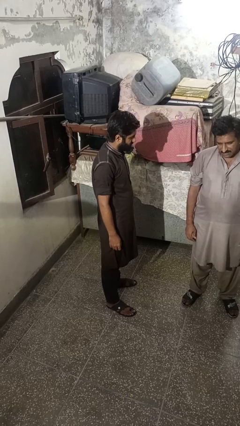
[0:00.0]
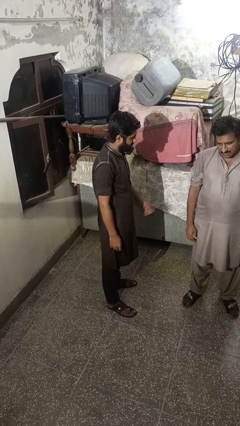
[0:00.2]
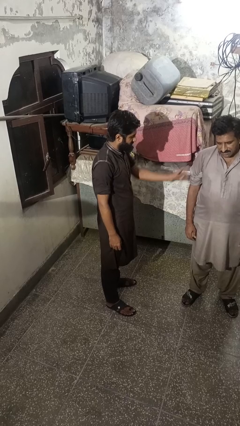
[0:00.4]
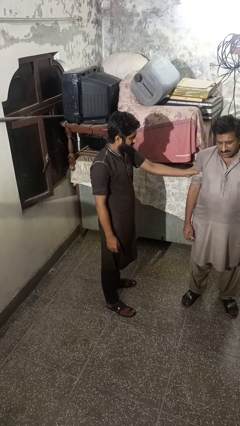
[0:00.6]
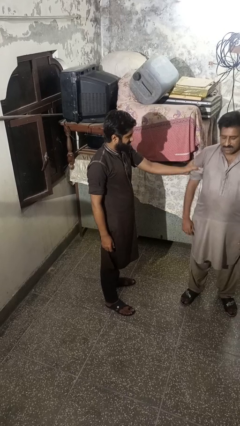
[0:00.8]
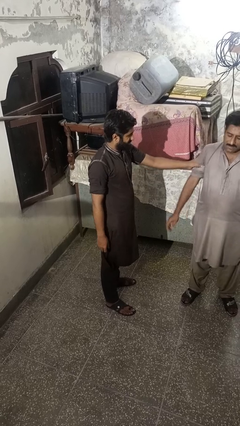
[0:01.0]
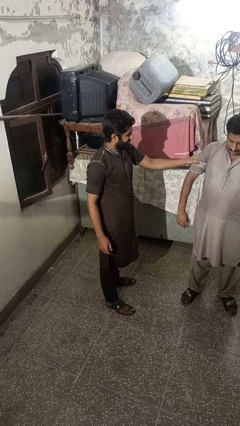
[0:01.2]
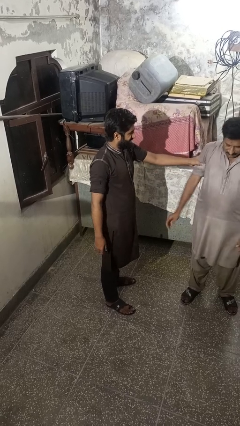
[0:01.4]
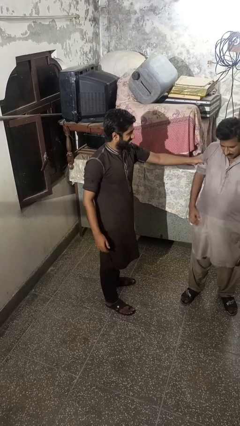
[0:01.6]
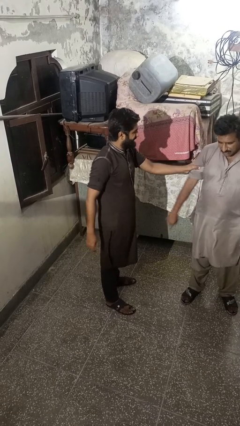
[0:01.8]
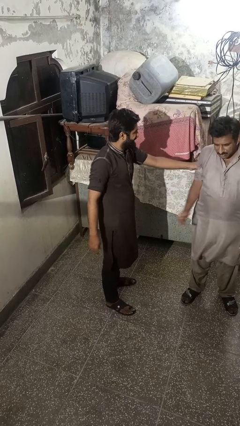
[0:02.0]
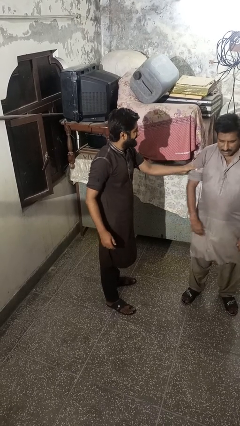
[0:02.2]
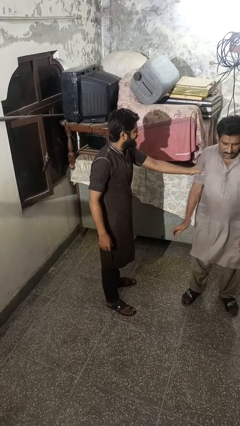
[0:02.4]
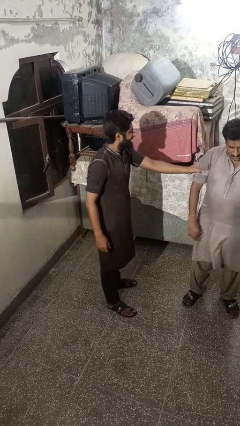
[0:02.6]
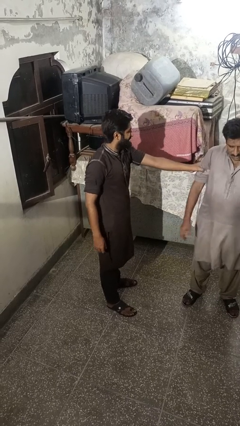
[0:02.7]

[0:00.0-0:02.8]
person grabs person by bicep

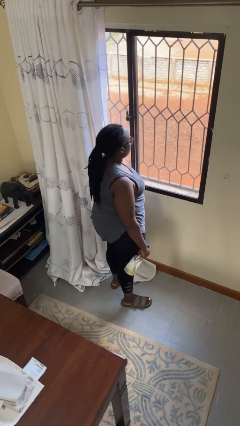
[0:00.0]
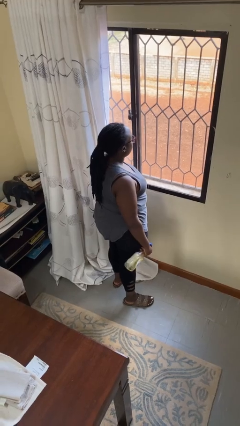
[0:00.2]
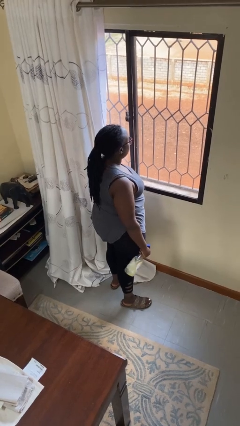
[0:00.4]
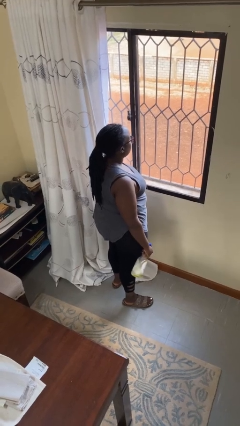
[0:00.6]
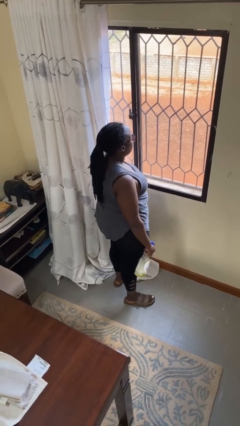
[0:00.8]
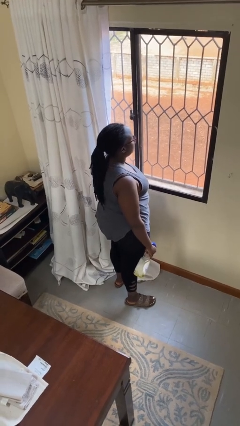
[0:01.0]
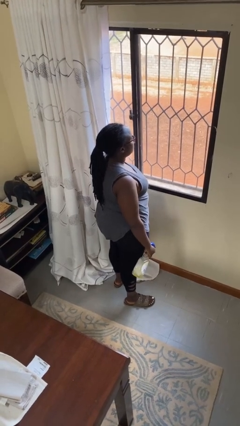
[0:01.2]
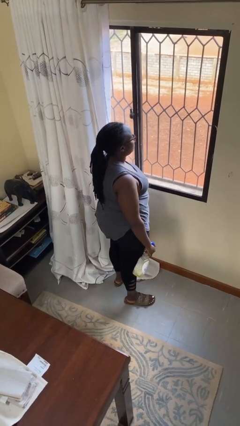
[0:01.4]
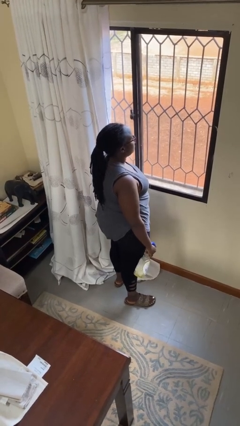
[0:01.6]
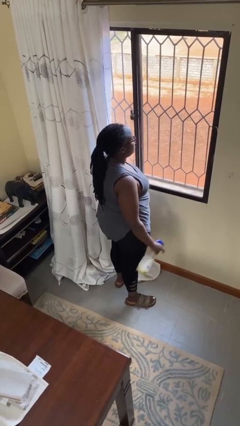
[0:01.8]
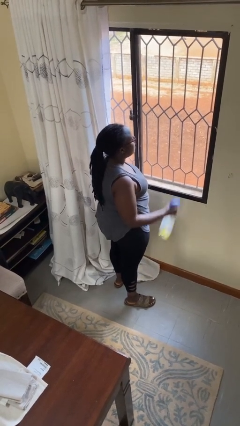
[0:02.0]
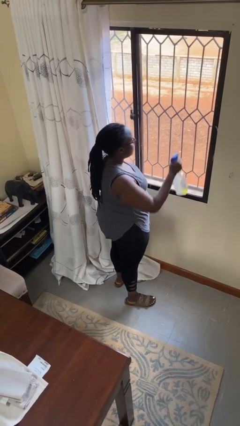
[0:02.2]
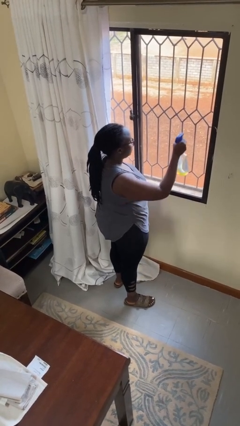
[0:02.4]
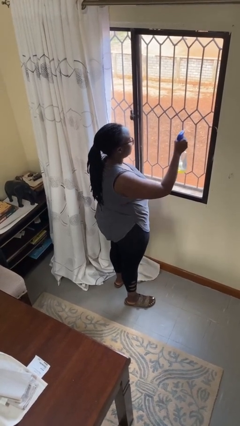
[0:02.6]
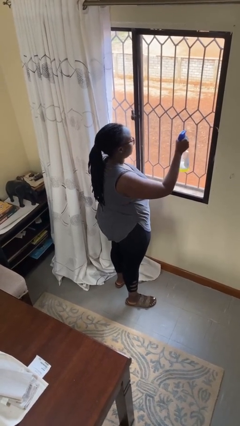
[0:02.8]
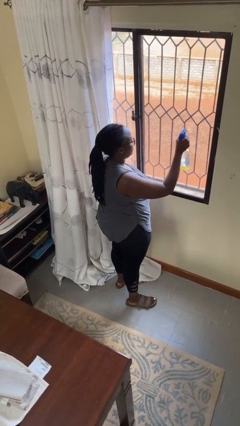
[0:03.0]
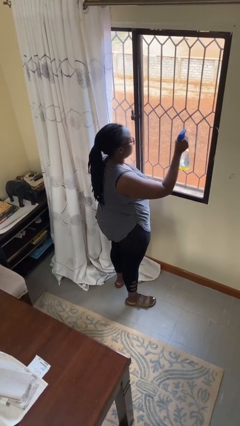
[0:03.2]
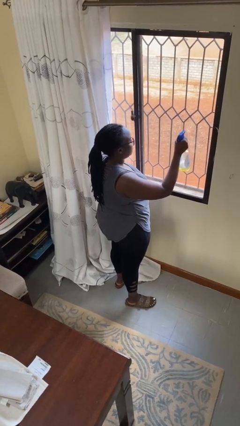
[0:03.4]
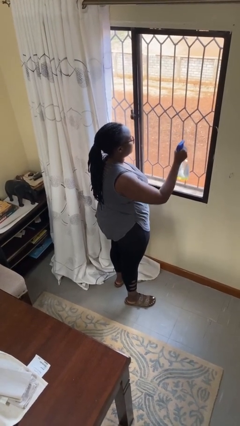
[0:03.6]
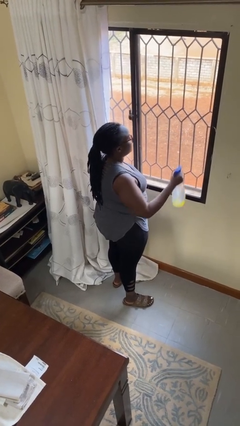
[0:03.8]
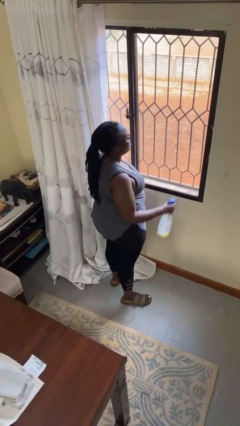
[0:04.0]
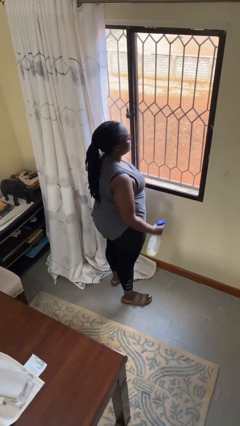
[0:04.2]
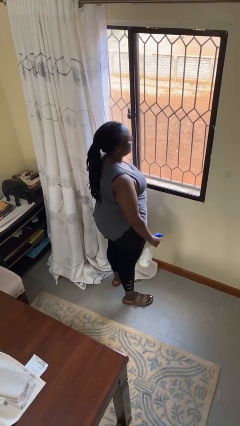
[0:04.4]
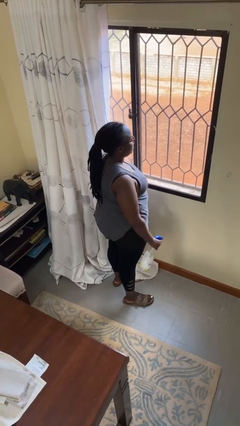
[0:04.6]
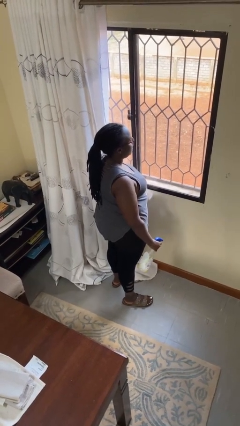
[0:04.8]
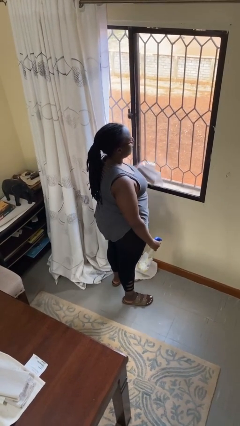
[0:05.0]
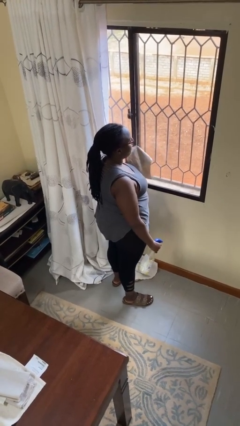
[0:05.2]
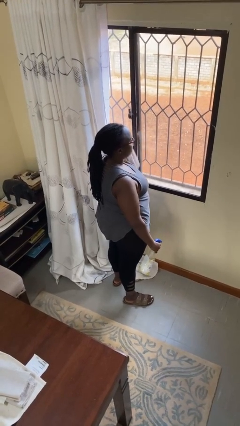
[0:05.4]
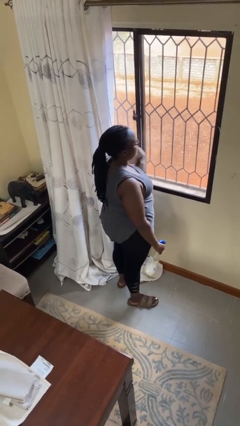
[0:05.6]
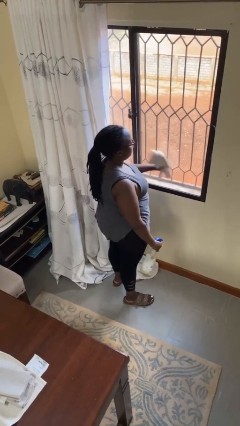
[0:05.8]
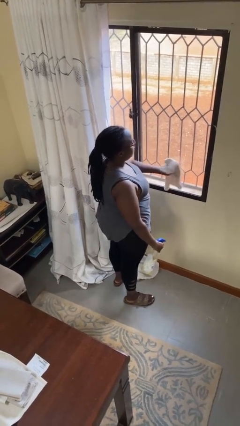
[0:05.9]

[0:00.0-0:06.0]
person sprays from bottle

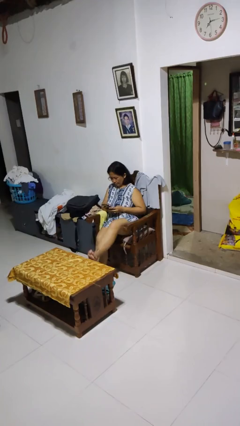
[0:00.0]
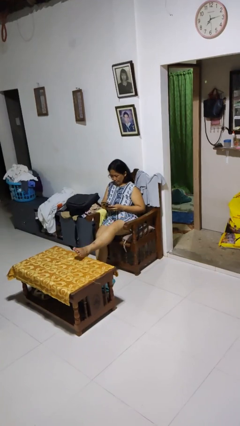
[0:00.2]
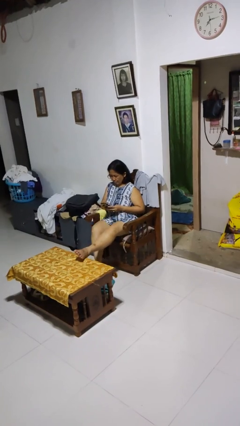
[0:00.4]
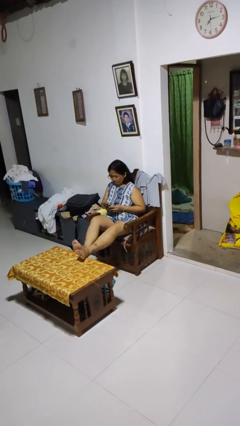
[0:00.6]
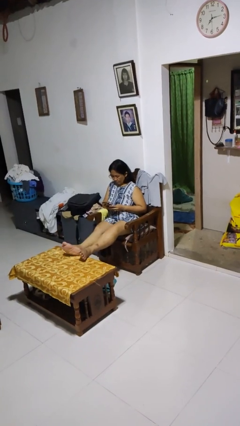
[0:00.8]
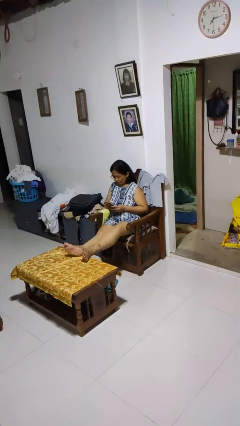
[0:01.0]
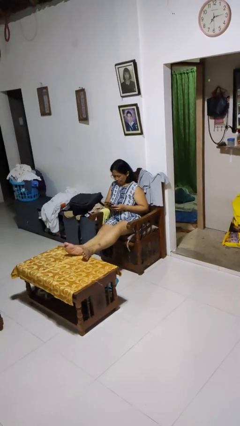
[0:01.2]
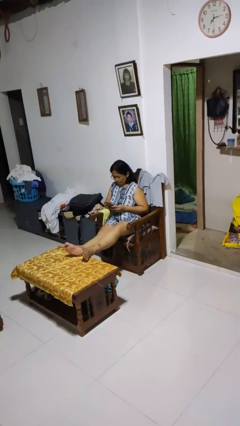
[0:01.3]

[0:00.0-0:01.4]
person puts feet up

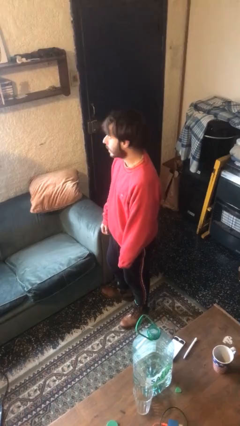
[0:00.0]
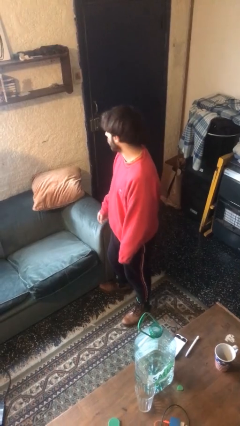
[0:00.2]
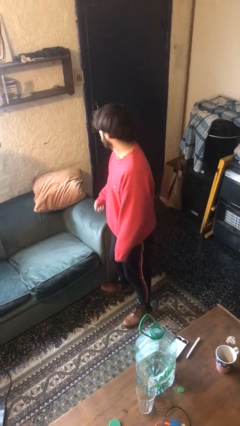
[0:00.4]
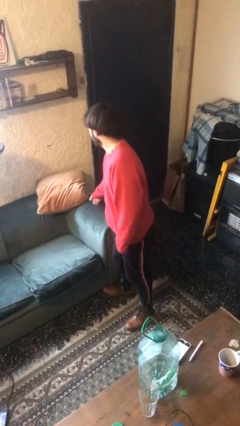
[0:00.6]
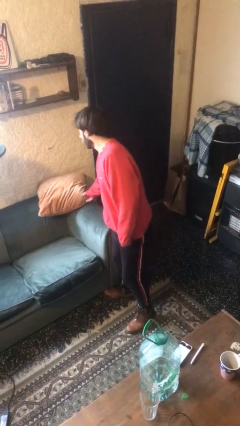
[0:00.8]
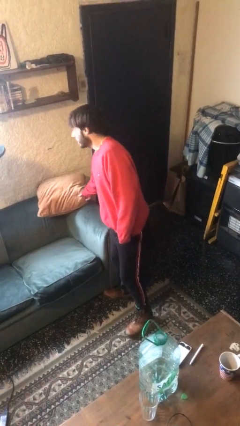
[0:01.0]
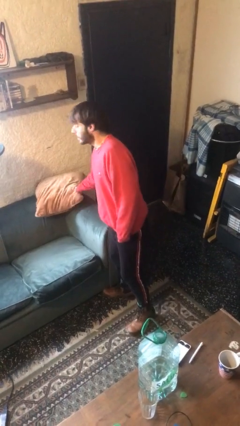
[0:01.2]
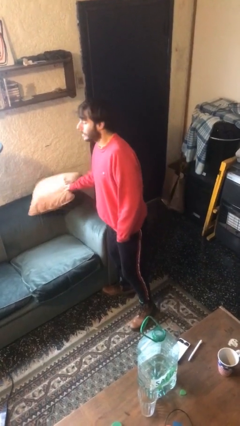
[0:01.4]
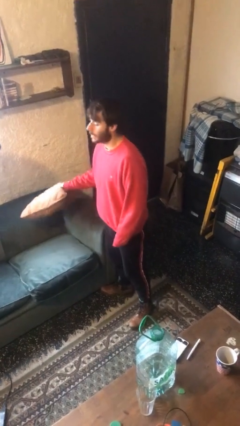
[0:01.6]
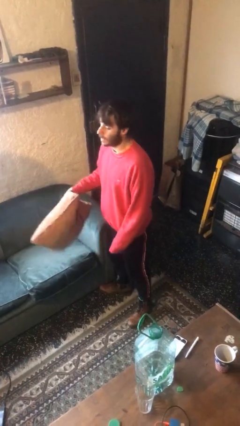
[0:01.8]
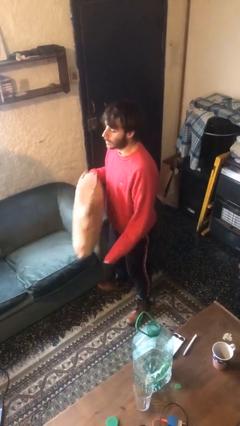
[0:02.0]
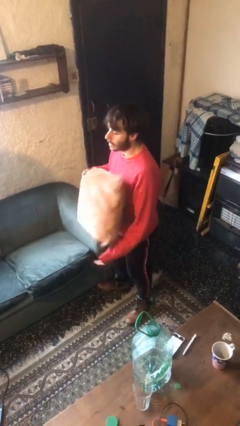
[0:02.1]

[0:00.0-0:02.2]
person picks up object from couch

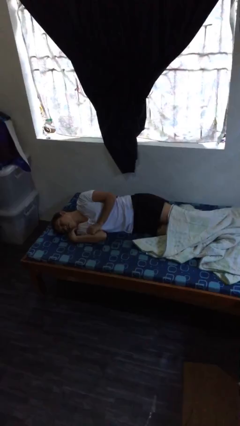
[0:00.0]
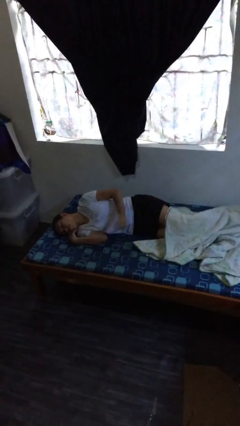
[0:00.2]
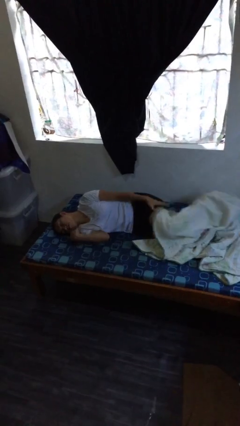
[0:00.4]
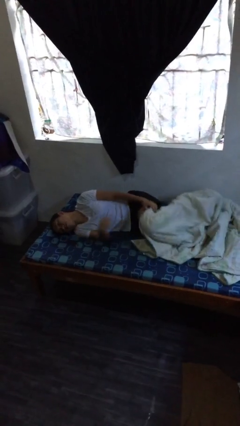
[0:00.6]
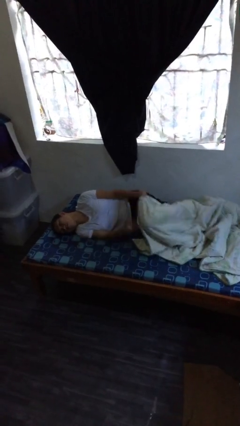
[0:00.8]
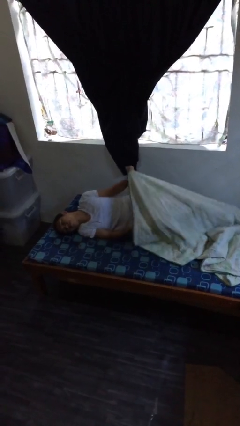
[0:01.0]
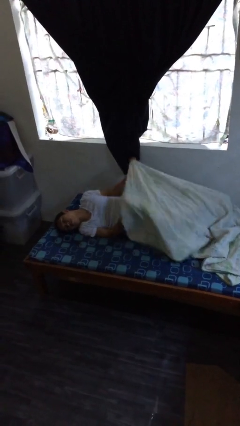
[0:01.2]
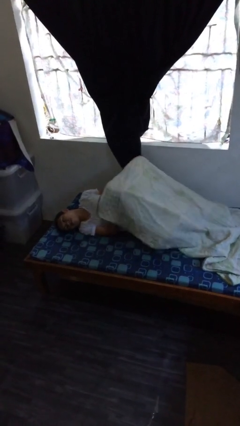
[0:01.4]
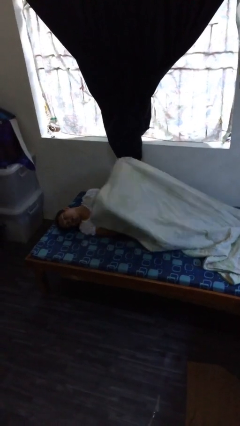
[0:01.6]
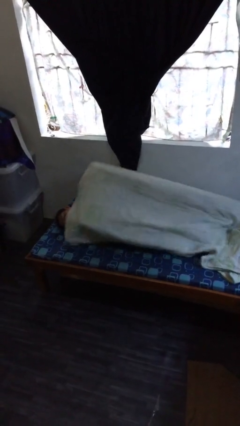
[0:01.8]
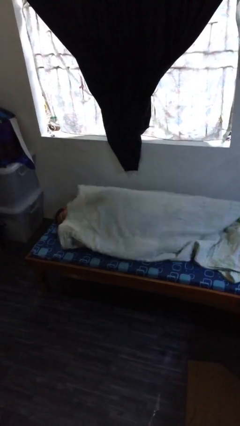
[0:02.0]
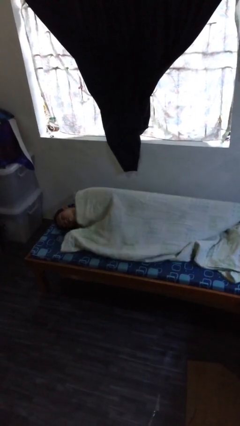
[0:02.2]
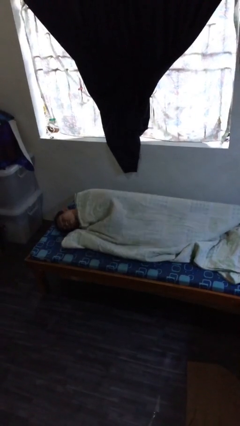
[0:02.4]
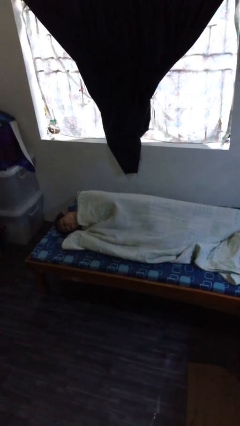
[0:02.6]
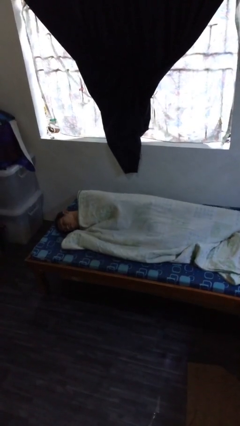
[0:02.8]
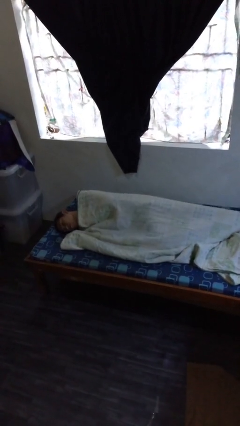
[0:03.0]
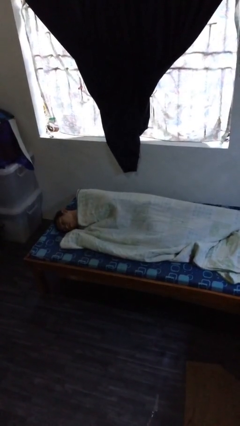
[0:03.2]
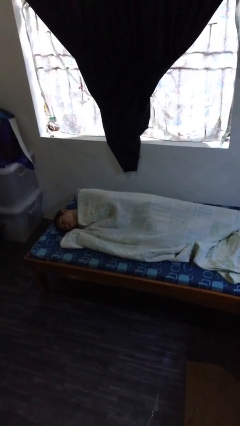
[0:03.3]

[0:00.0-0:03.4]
person covers with bedsheets

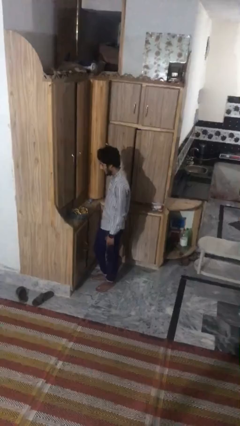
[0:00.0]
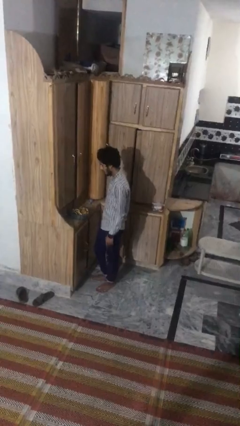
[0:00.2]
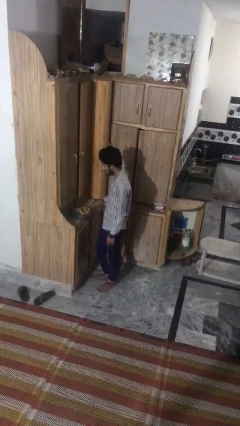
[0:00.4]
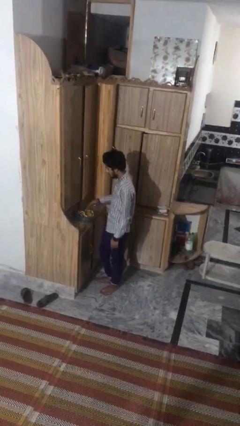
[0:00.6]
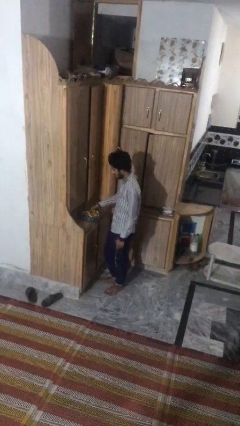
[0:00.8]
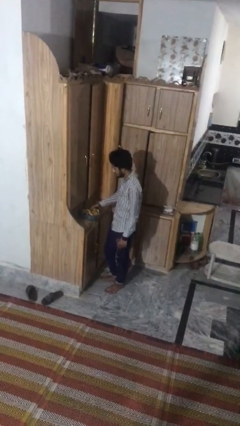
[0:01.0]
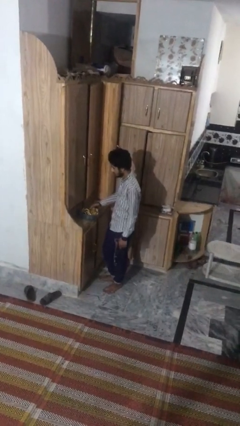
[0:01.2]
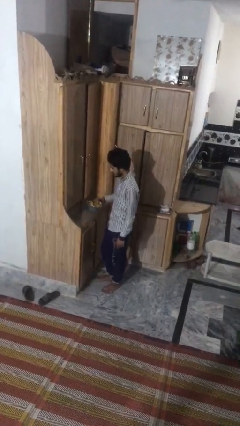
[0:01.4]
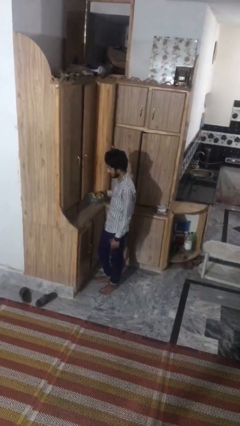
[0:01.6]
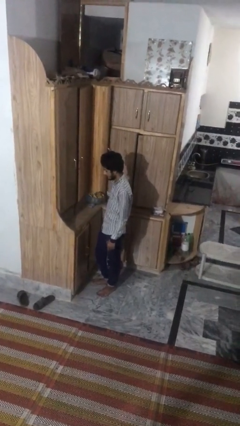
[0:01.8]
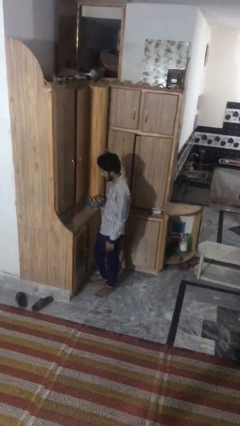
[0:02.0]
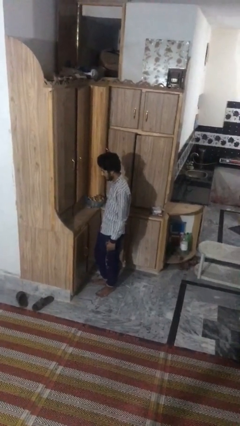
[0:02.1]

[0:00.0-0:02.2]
person picks up object from countertop
